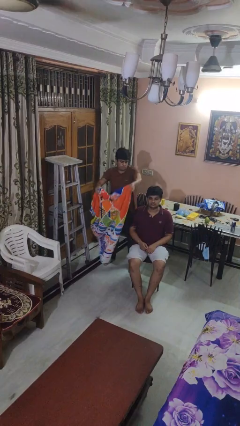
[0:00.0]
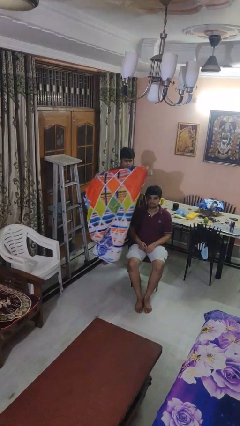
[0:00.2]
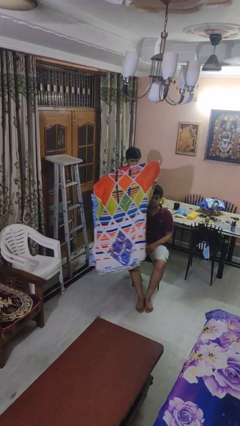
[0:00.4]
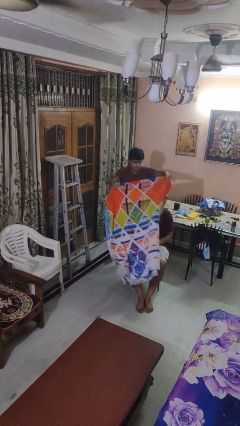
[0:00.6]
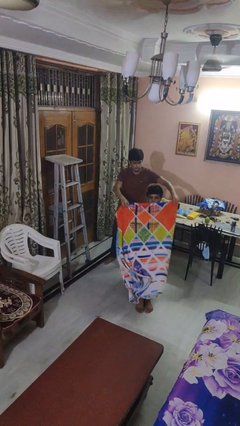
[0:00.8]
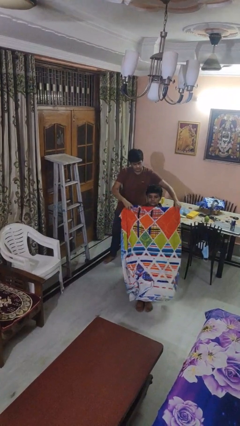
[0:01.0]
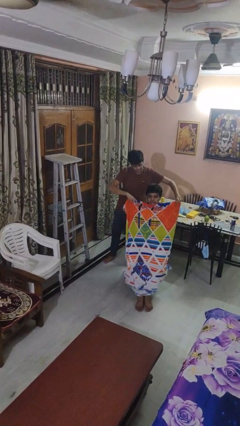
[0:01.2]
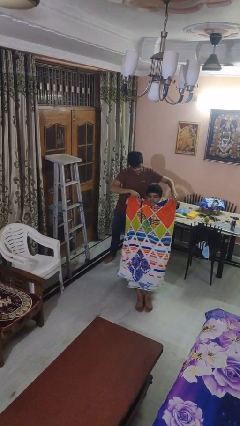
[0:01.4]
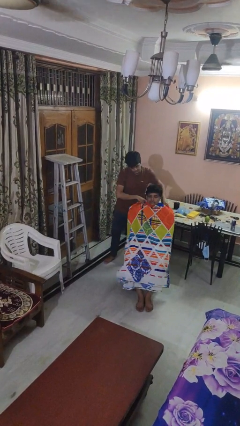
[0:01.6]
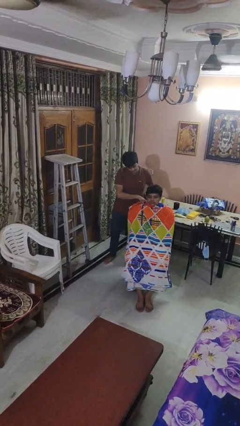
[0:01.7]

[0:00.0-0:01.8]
person covers friend with blanket

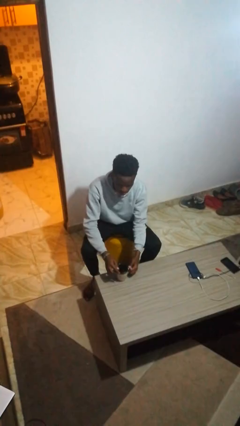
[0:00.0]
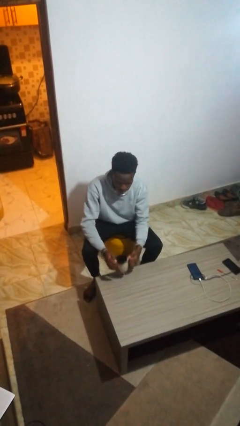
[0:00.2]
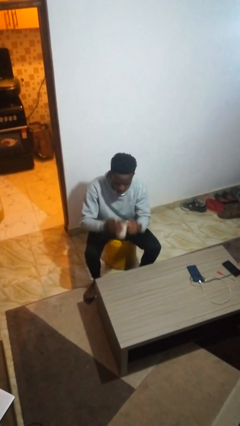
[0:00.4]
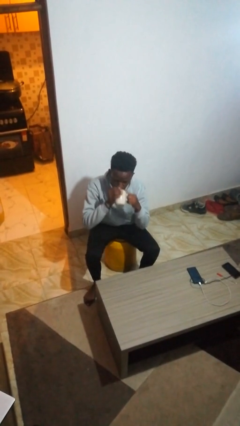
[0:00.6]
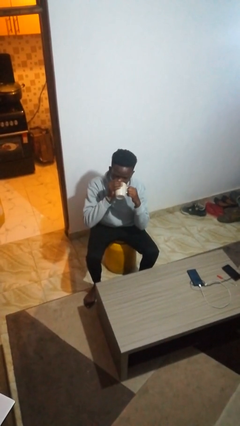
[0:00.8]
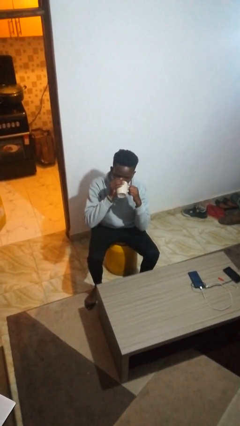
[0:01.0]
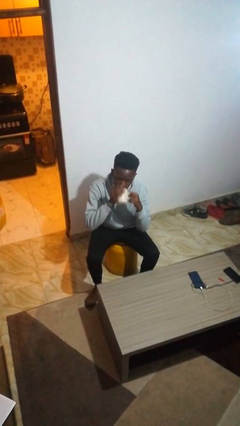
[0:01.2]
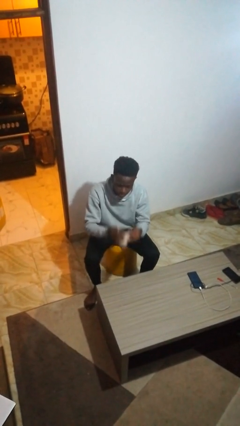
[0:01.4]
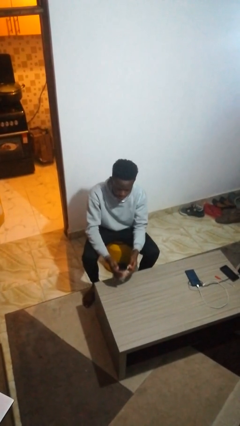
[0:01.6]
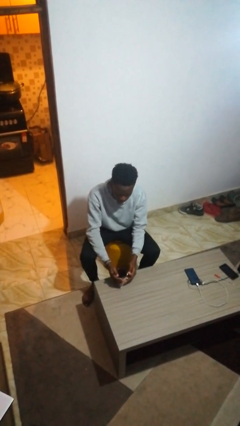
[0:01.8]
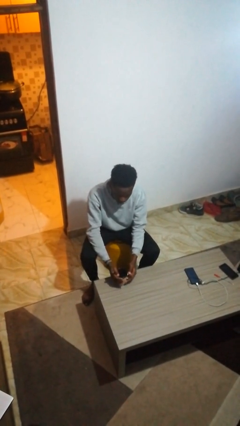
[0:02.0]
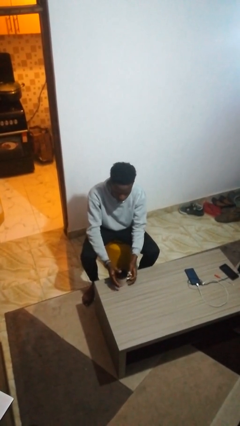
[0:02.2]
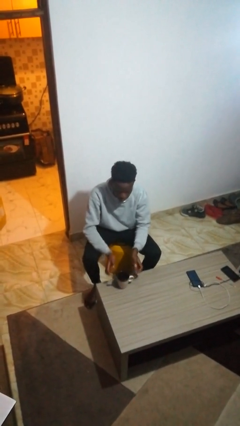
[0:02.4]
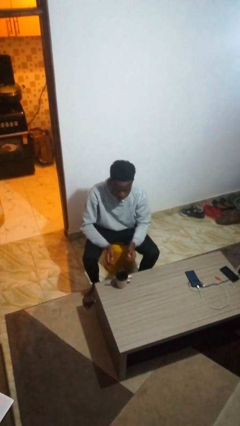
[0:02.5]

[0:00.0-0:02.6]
person drinks from mug

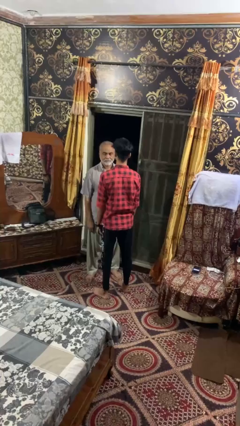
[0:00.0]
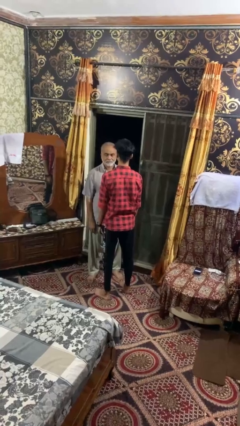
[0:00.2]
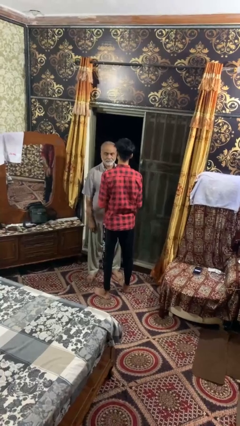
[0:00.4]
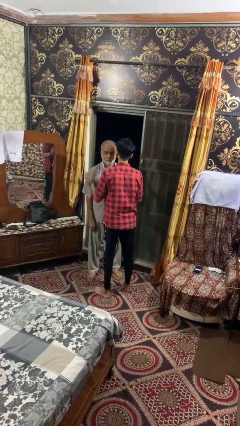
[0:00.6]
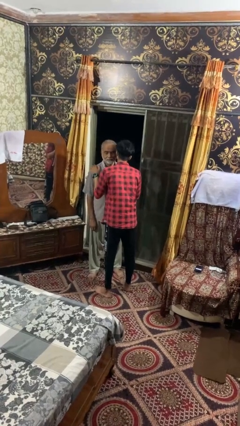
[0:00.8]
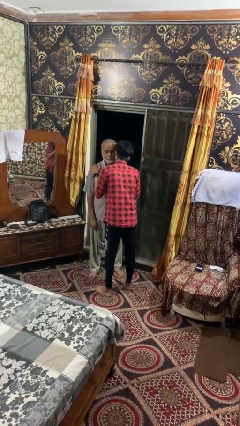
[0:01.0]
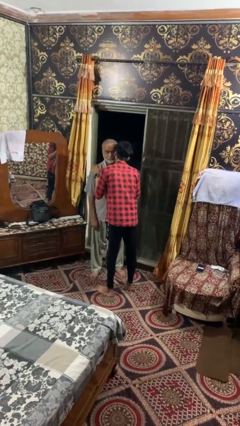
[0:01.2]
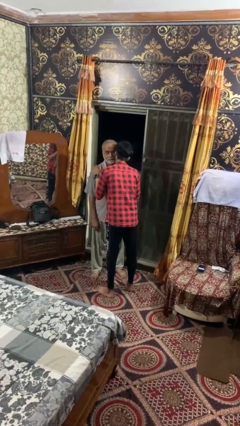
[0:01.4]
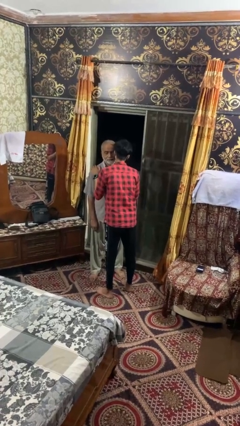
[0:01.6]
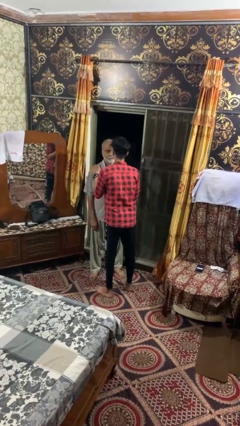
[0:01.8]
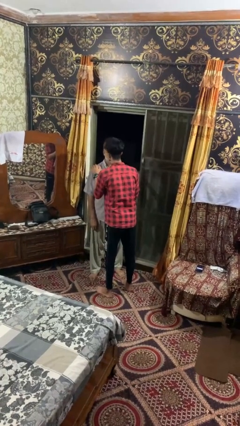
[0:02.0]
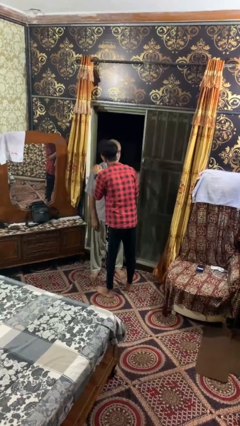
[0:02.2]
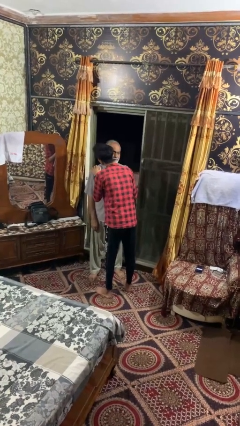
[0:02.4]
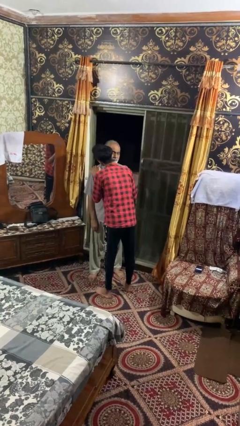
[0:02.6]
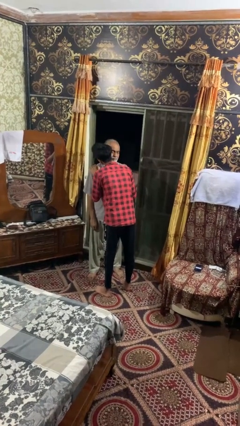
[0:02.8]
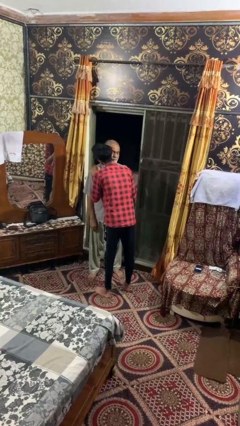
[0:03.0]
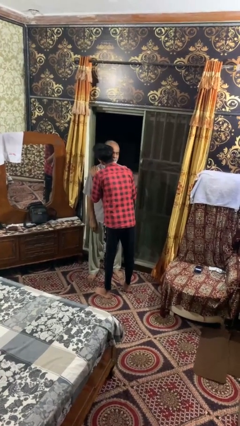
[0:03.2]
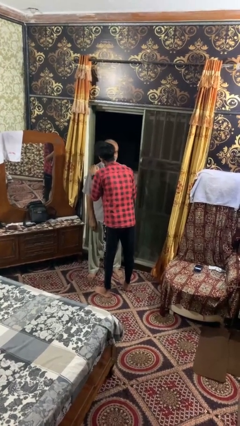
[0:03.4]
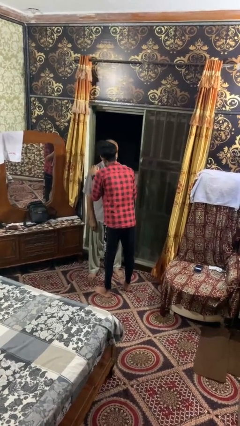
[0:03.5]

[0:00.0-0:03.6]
person kisses cheek of person

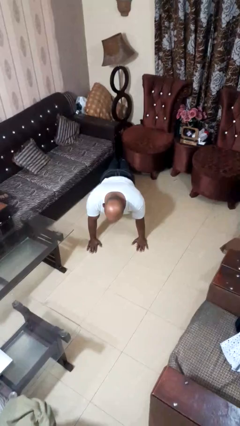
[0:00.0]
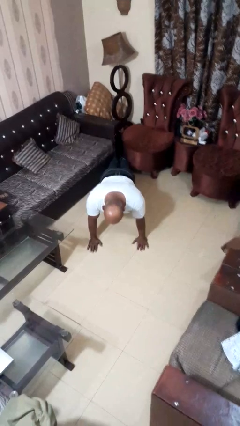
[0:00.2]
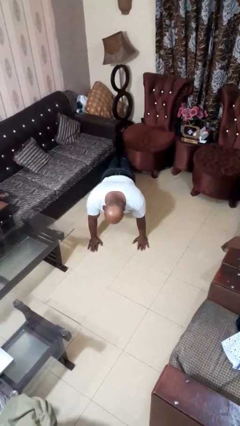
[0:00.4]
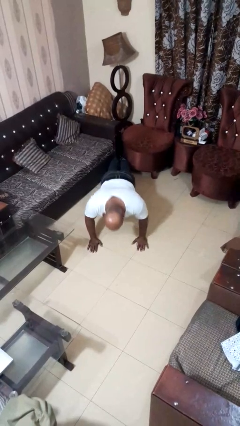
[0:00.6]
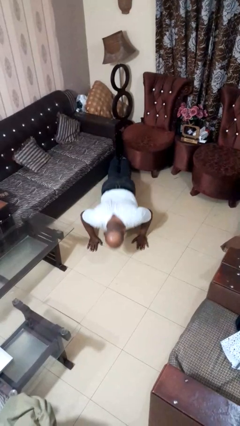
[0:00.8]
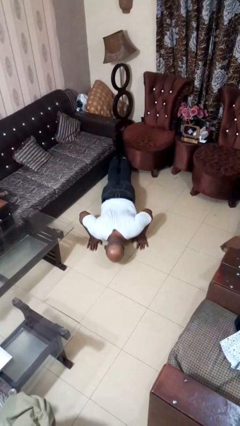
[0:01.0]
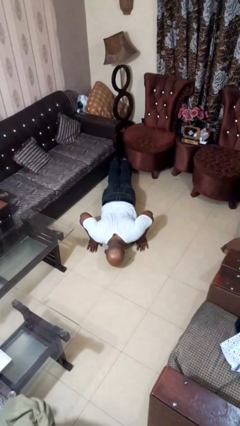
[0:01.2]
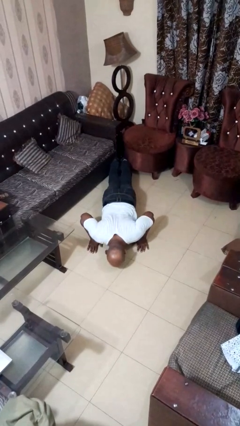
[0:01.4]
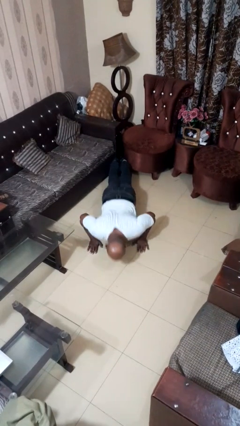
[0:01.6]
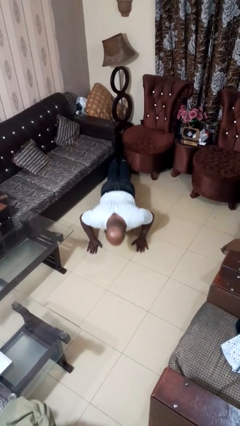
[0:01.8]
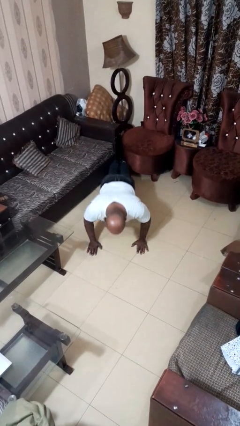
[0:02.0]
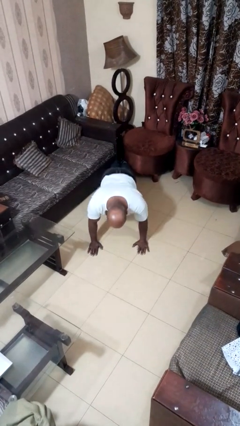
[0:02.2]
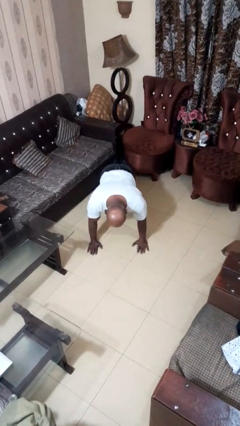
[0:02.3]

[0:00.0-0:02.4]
person exercises with pushup

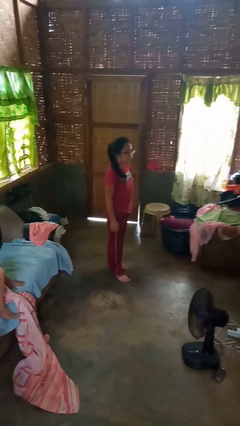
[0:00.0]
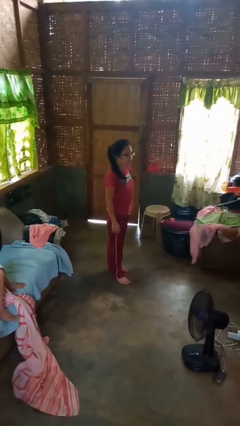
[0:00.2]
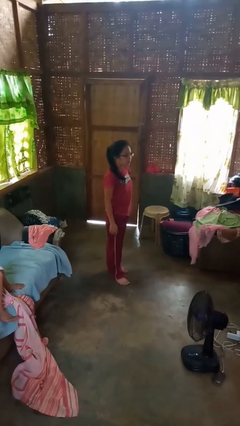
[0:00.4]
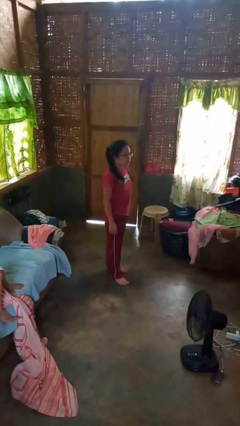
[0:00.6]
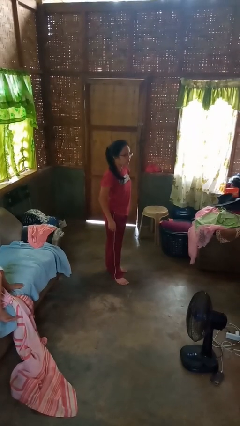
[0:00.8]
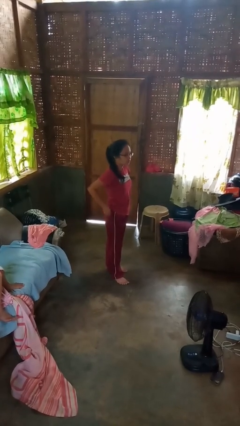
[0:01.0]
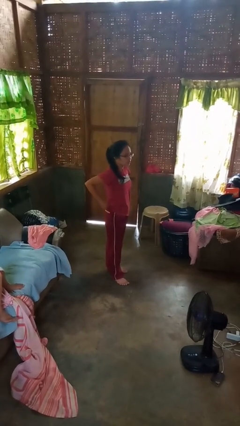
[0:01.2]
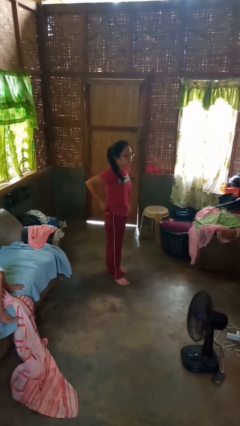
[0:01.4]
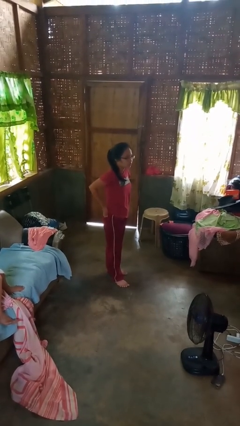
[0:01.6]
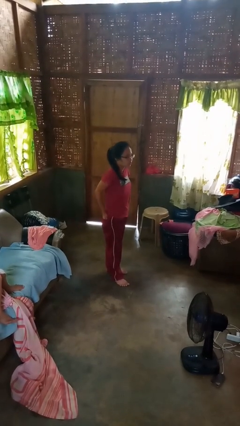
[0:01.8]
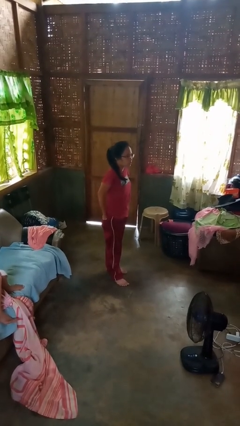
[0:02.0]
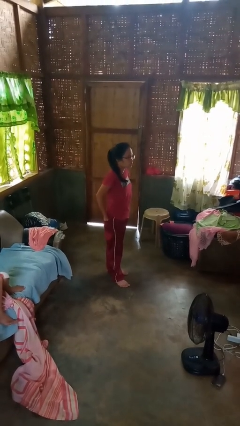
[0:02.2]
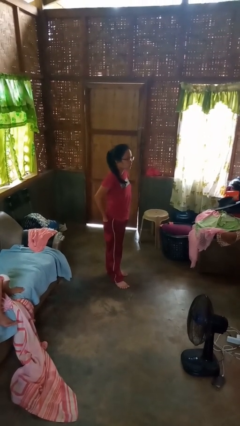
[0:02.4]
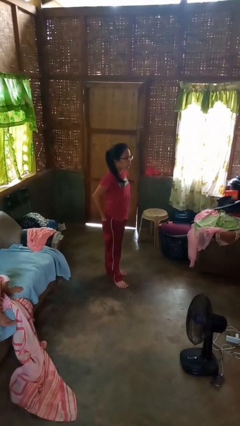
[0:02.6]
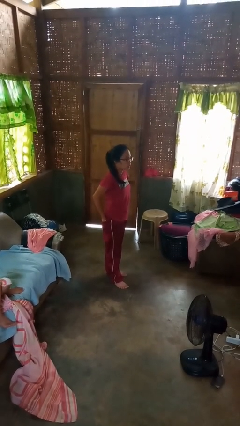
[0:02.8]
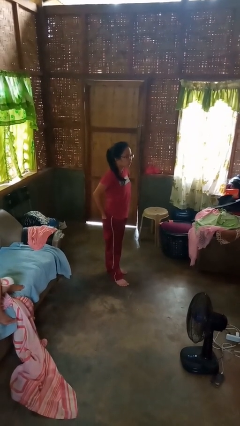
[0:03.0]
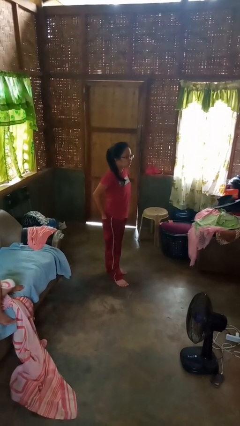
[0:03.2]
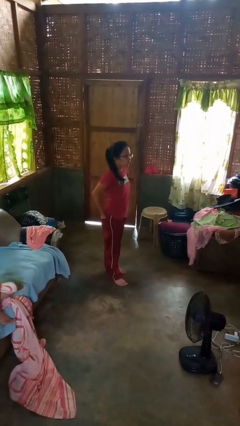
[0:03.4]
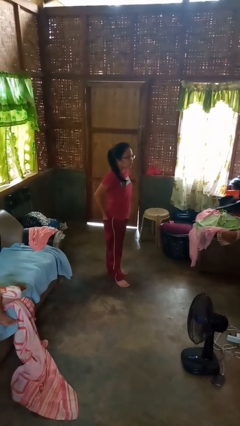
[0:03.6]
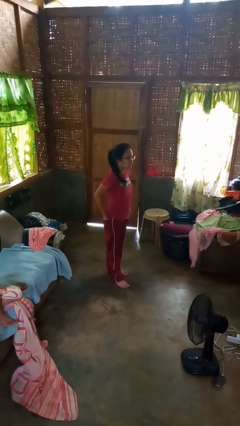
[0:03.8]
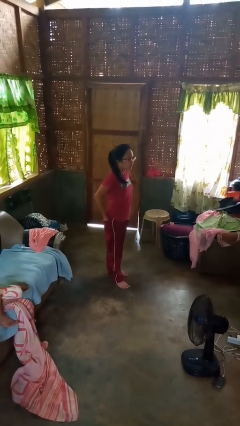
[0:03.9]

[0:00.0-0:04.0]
person puts hands in back pockets

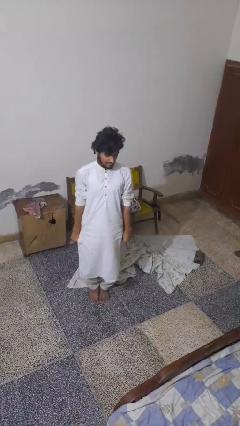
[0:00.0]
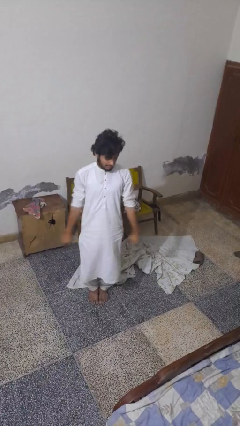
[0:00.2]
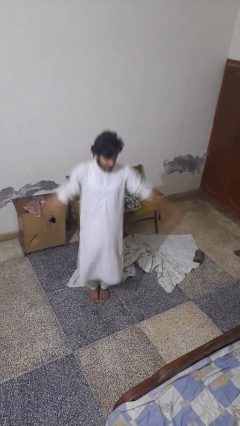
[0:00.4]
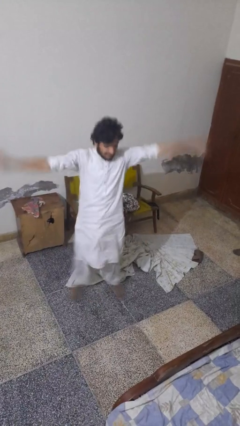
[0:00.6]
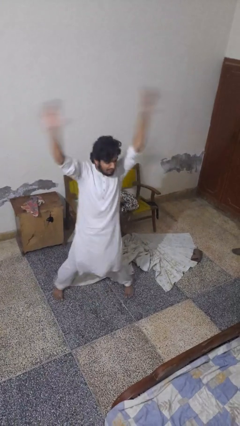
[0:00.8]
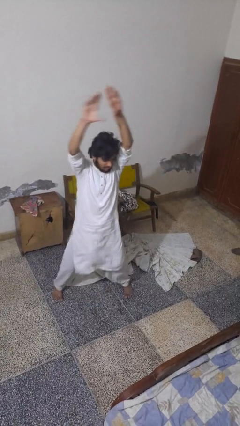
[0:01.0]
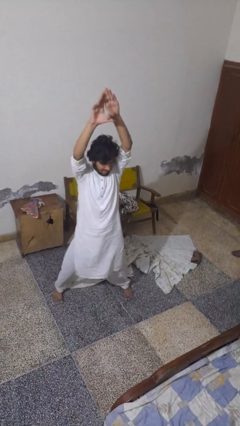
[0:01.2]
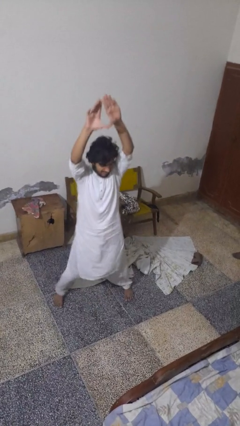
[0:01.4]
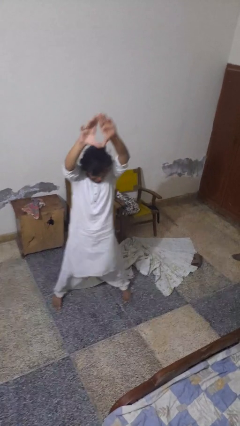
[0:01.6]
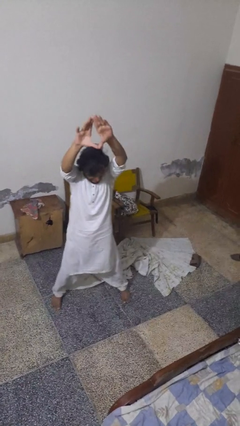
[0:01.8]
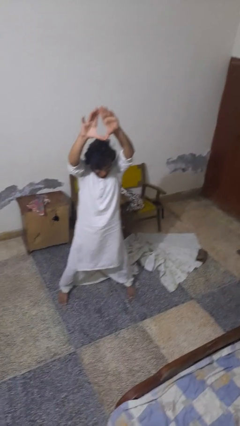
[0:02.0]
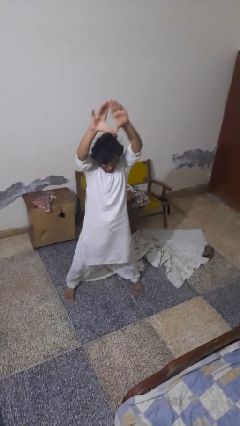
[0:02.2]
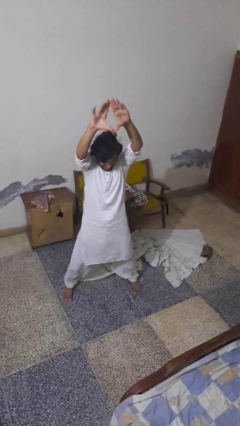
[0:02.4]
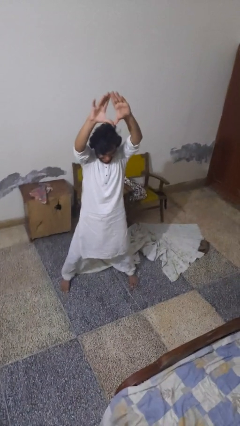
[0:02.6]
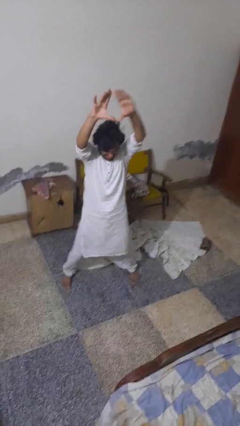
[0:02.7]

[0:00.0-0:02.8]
person exercises with jumping jacks

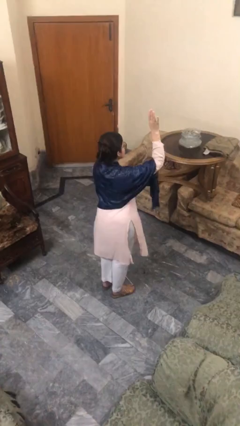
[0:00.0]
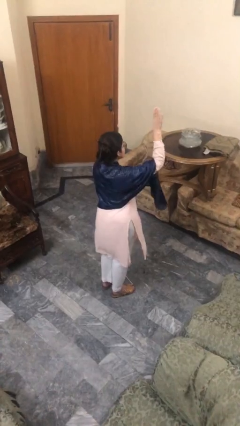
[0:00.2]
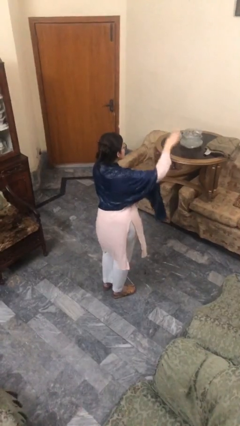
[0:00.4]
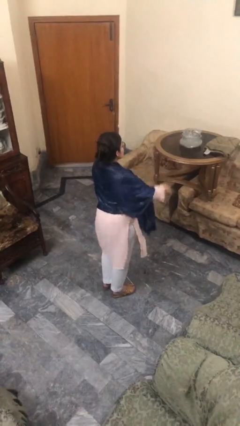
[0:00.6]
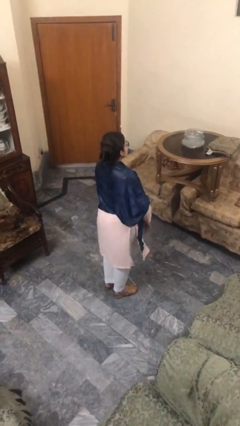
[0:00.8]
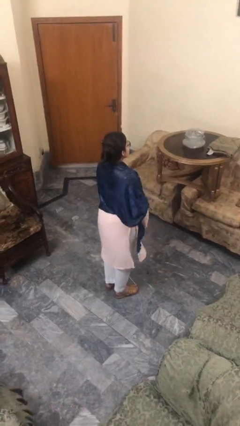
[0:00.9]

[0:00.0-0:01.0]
person gestures lower hand
